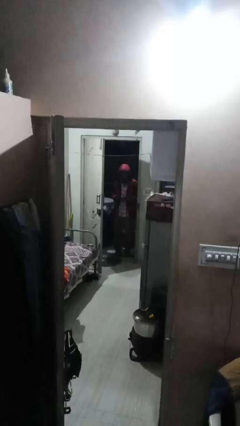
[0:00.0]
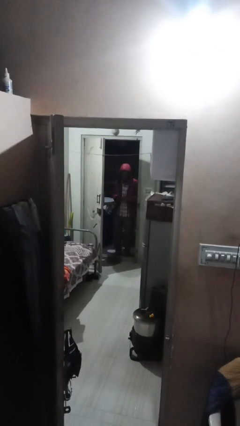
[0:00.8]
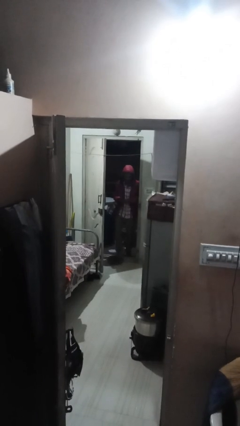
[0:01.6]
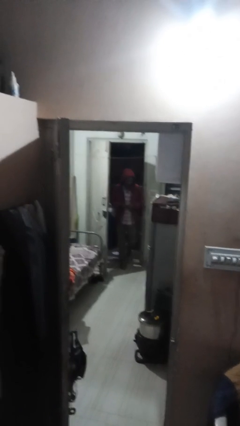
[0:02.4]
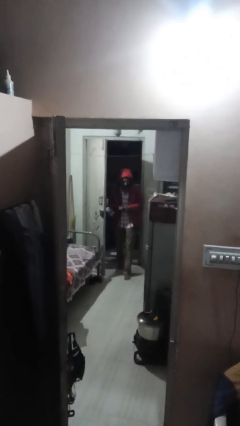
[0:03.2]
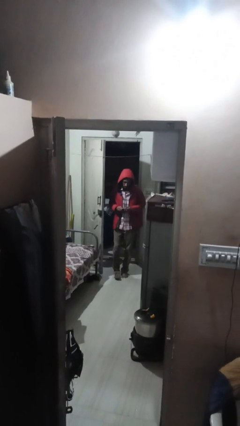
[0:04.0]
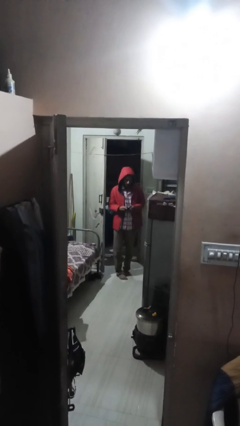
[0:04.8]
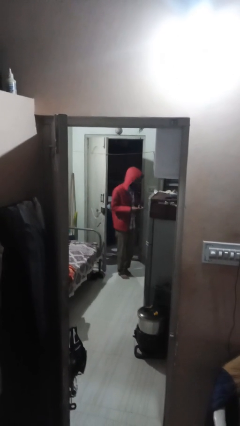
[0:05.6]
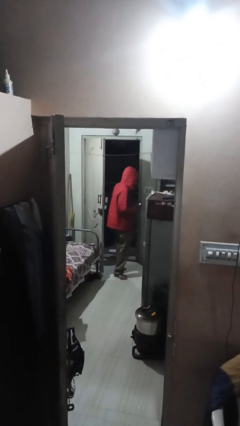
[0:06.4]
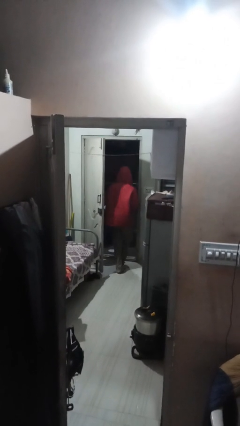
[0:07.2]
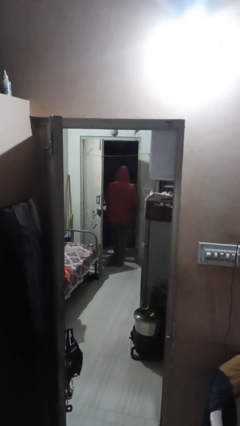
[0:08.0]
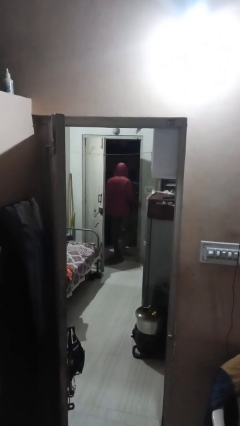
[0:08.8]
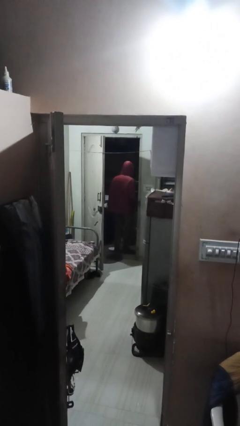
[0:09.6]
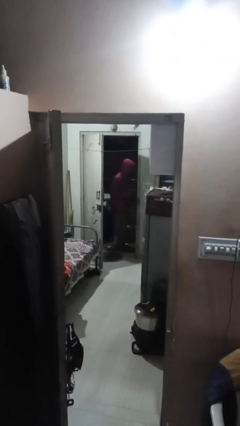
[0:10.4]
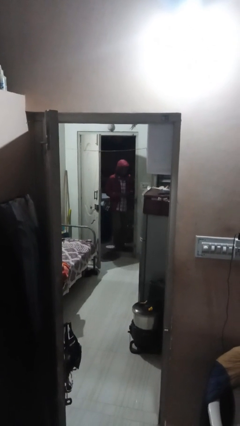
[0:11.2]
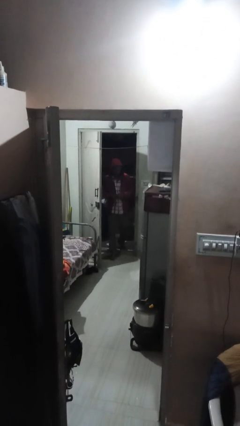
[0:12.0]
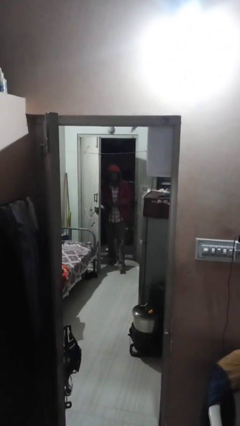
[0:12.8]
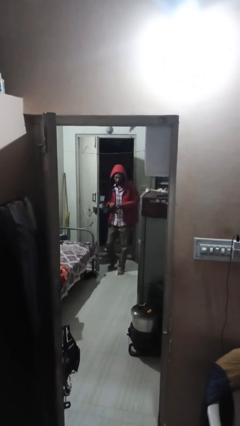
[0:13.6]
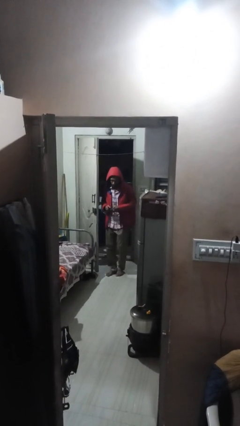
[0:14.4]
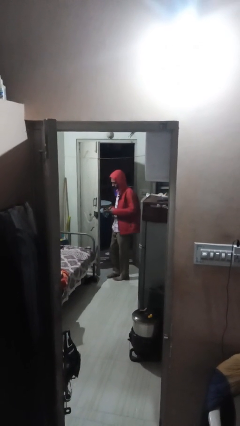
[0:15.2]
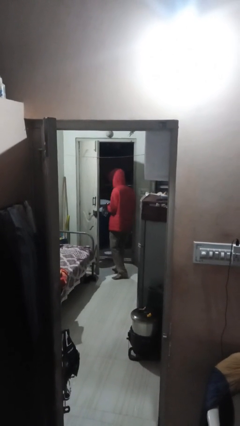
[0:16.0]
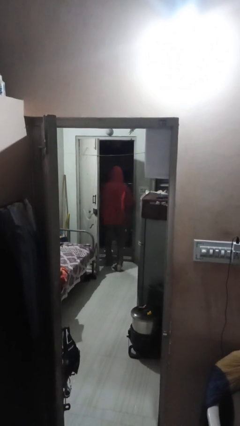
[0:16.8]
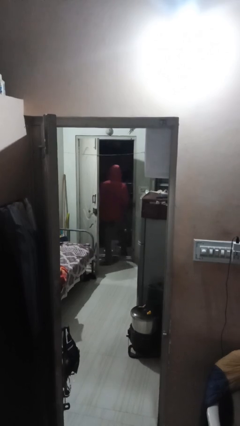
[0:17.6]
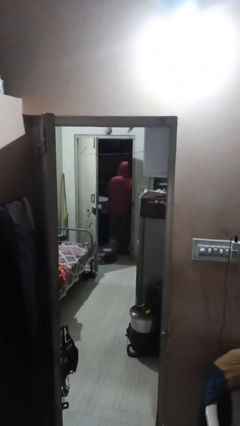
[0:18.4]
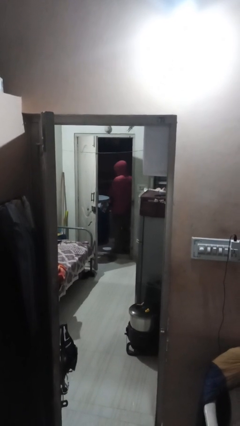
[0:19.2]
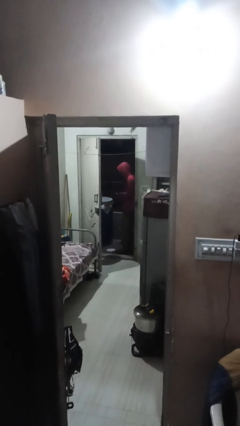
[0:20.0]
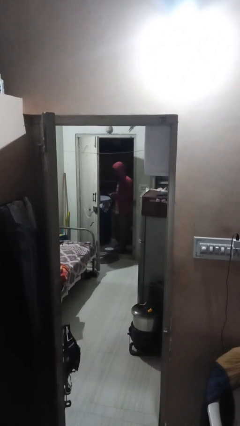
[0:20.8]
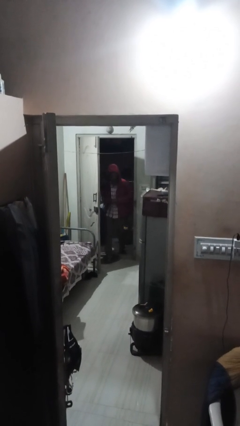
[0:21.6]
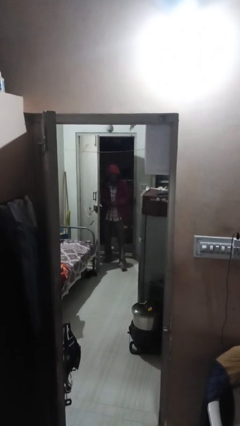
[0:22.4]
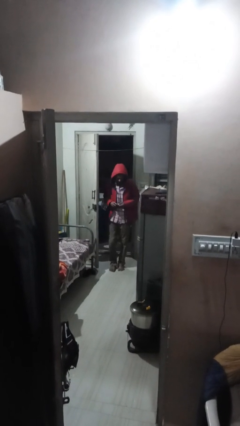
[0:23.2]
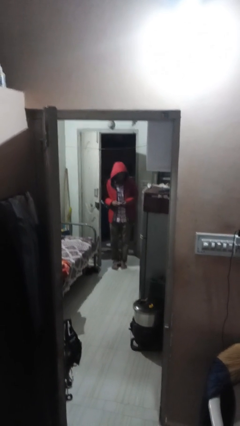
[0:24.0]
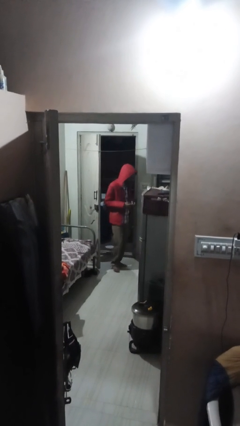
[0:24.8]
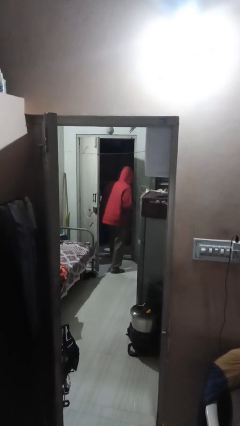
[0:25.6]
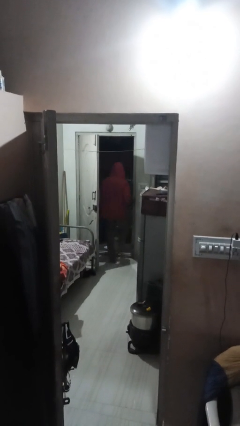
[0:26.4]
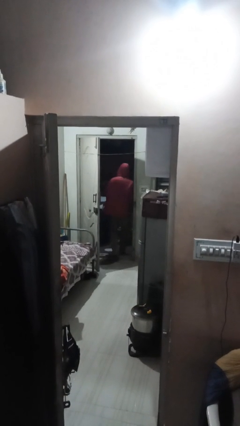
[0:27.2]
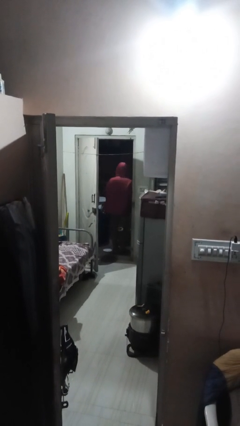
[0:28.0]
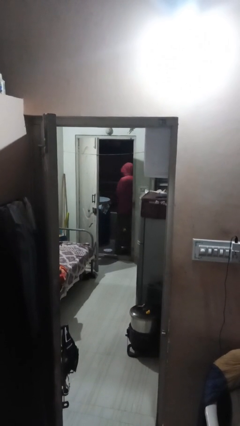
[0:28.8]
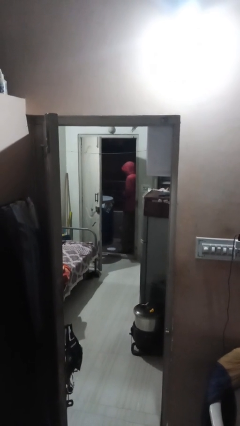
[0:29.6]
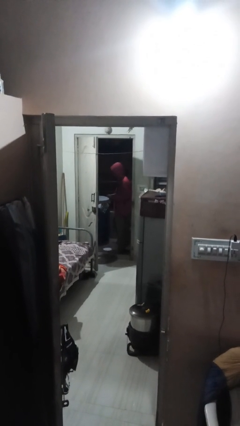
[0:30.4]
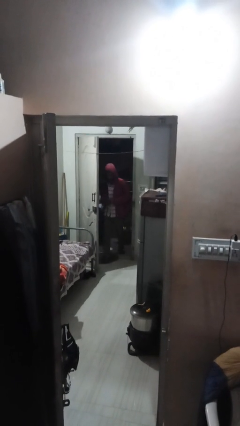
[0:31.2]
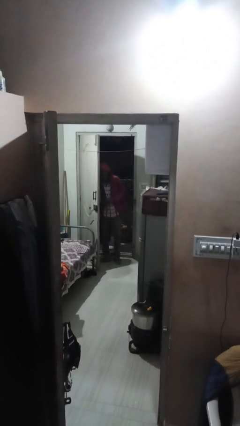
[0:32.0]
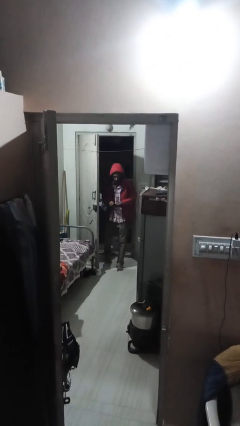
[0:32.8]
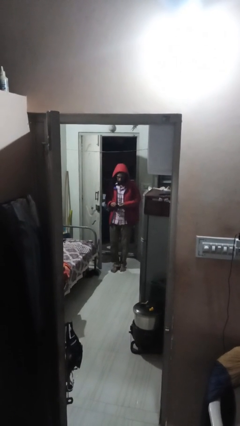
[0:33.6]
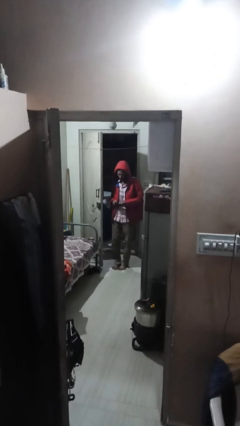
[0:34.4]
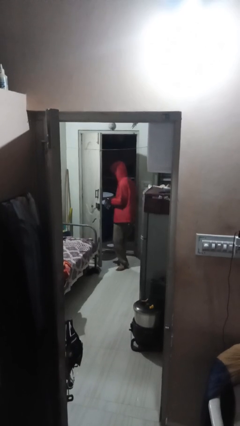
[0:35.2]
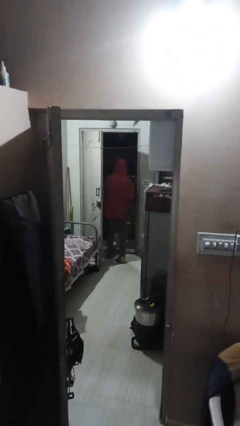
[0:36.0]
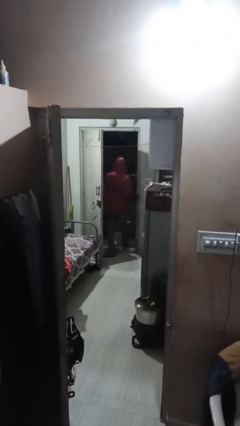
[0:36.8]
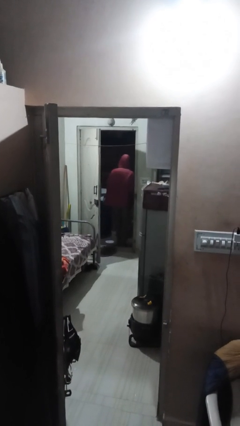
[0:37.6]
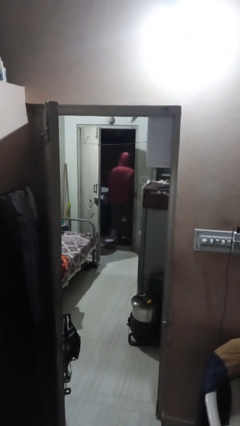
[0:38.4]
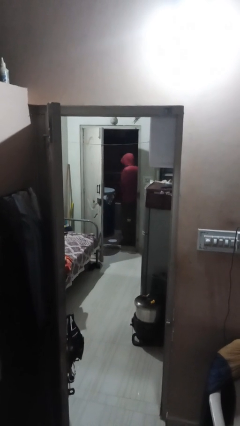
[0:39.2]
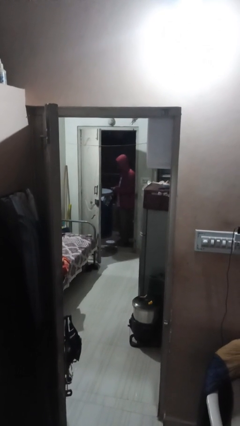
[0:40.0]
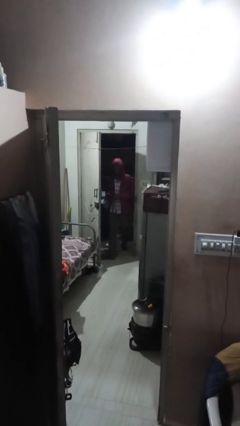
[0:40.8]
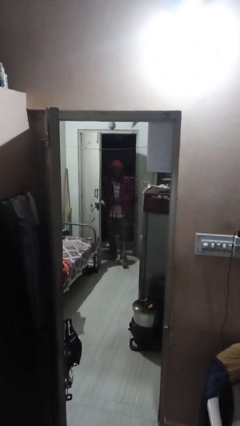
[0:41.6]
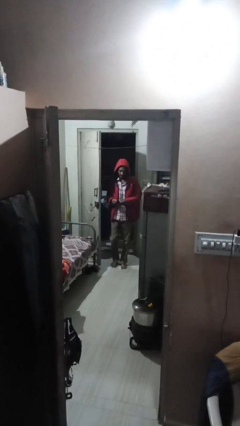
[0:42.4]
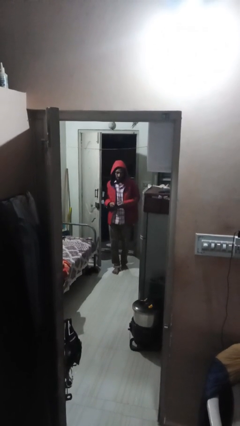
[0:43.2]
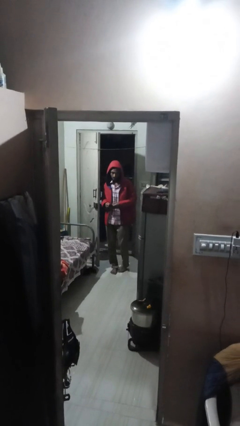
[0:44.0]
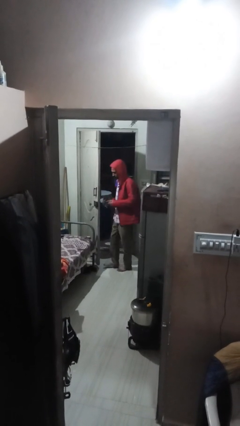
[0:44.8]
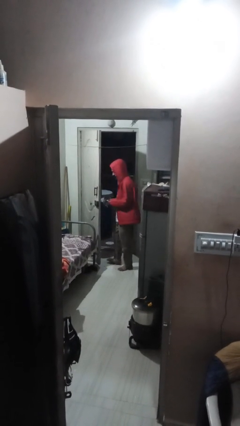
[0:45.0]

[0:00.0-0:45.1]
person texts on phone

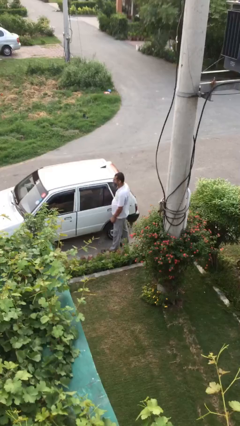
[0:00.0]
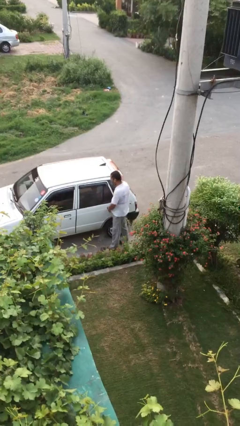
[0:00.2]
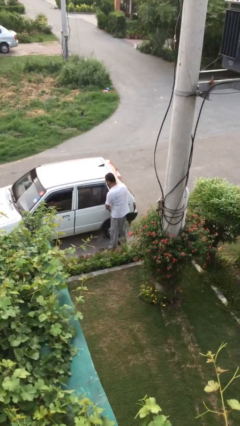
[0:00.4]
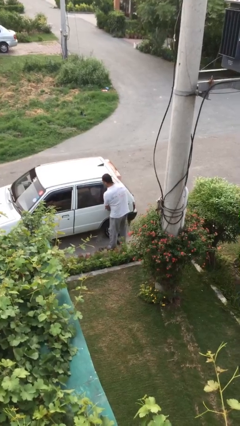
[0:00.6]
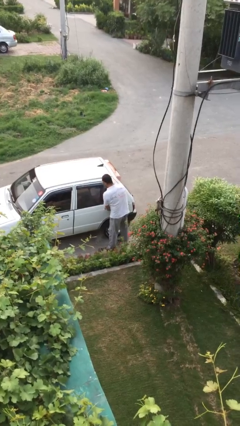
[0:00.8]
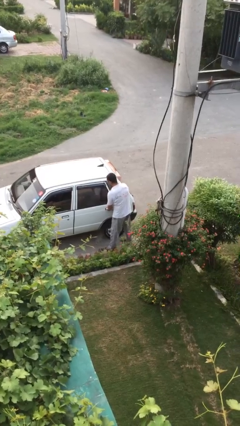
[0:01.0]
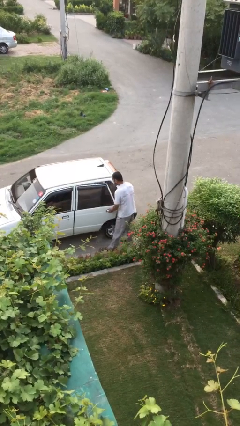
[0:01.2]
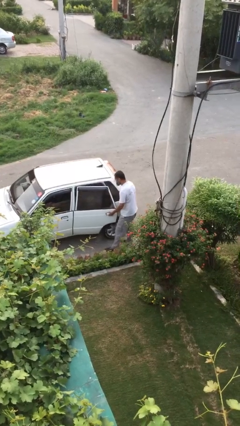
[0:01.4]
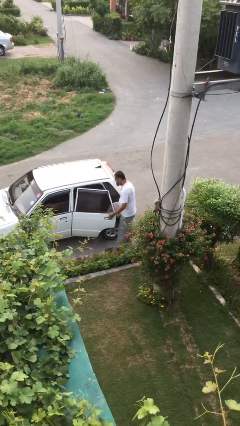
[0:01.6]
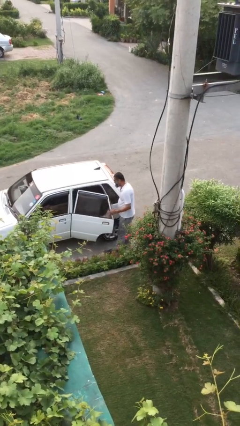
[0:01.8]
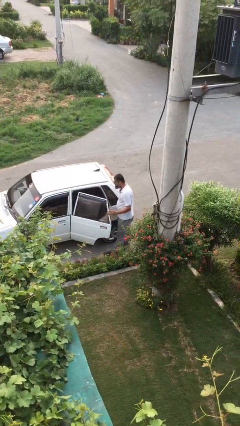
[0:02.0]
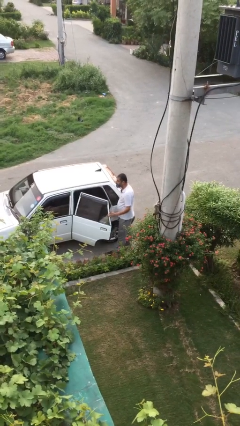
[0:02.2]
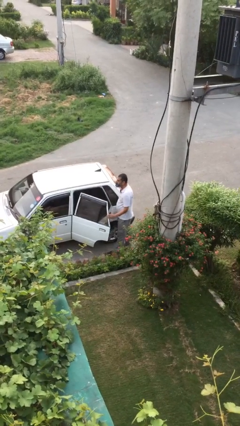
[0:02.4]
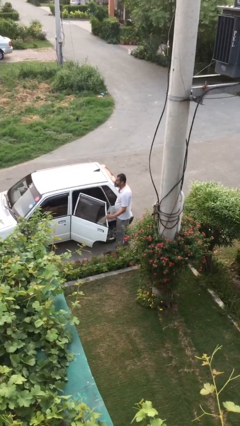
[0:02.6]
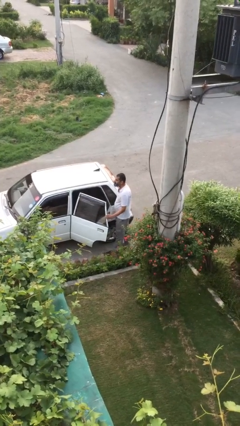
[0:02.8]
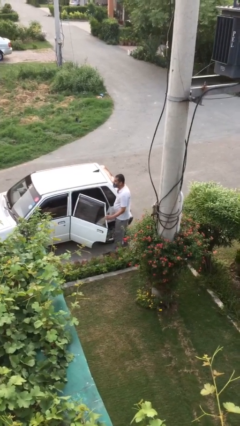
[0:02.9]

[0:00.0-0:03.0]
person opens car door

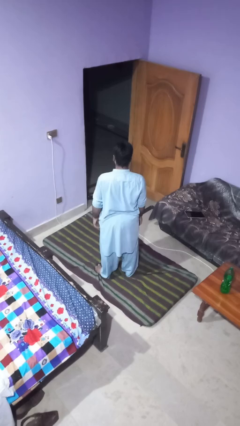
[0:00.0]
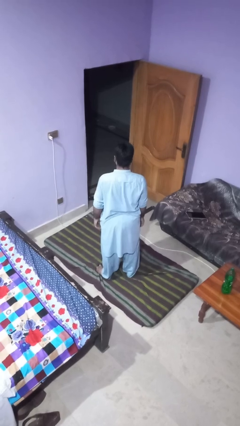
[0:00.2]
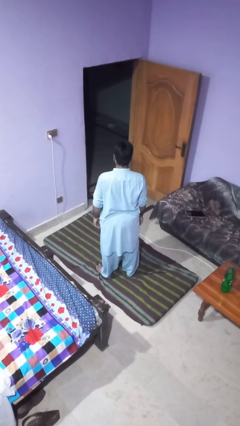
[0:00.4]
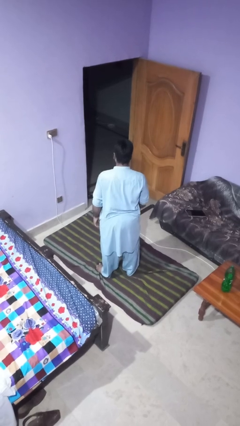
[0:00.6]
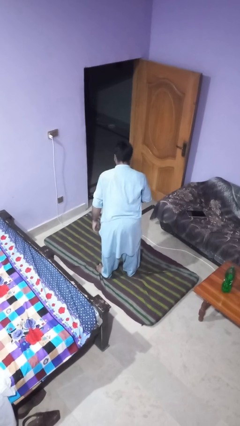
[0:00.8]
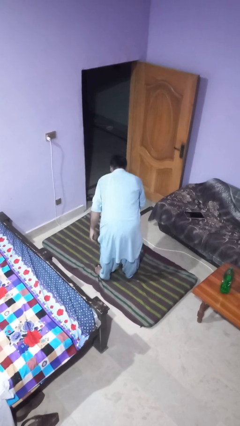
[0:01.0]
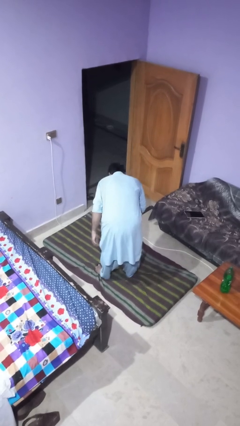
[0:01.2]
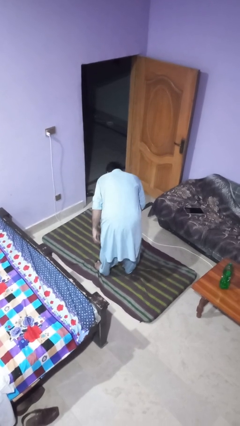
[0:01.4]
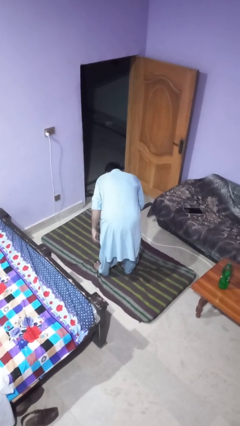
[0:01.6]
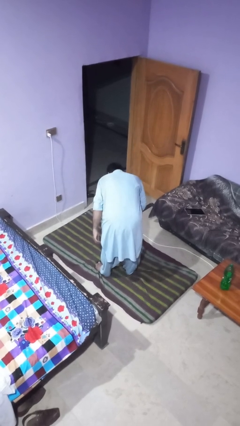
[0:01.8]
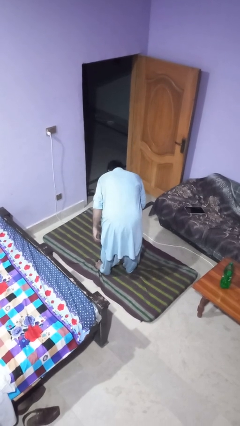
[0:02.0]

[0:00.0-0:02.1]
person bows

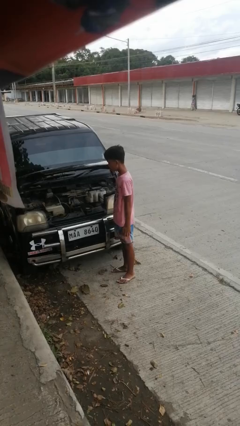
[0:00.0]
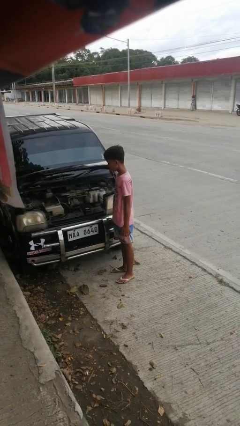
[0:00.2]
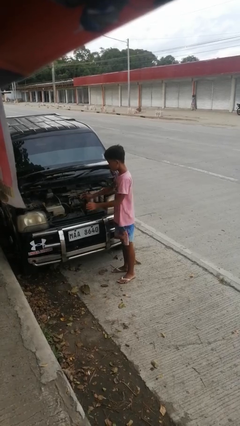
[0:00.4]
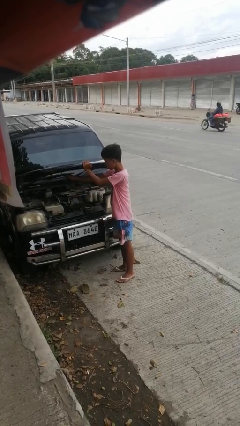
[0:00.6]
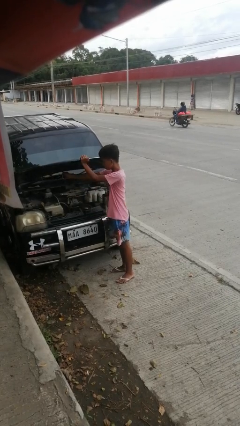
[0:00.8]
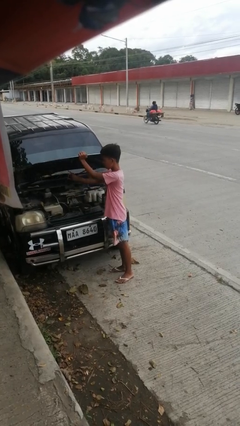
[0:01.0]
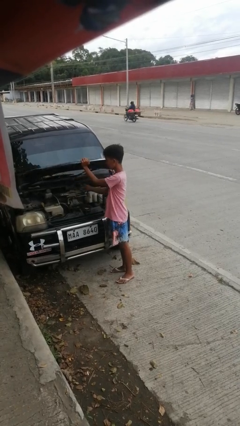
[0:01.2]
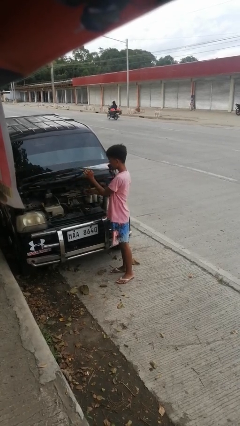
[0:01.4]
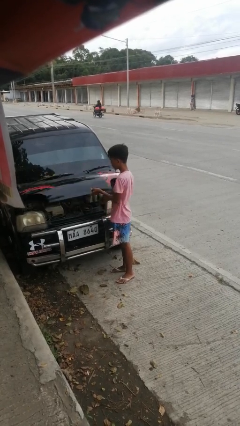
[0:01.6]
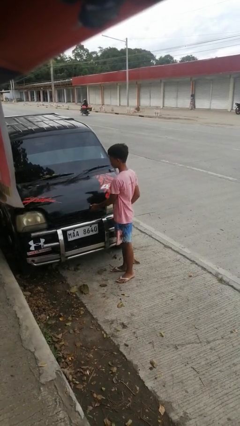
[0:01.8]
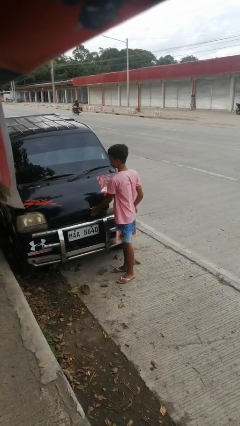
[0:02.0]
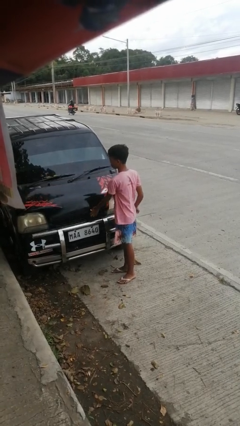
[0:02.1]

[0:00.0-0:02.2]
person closes car hood
